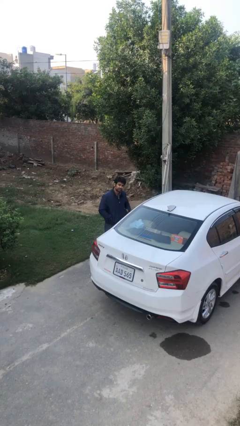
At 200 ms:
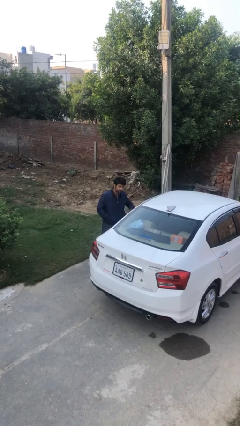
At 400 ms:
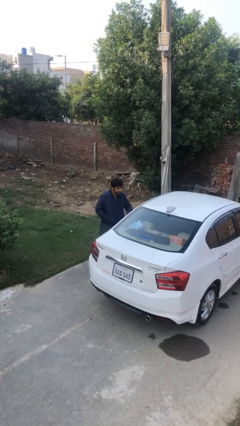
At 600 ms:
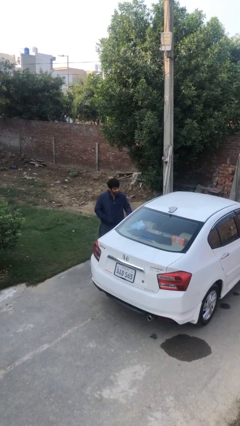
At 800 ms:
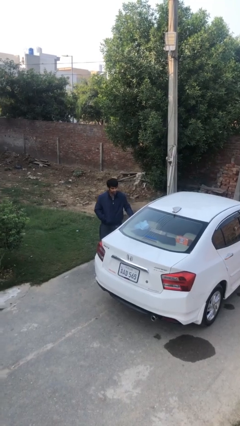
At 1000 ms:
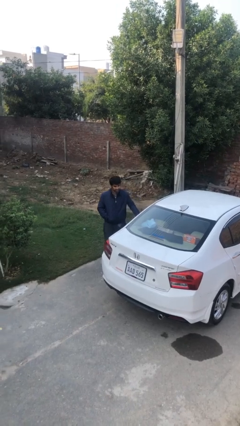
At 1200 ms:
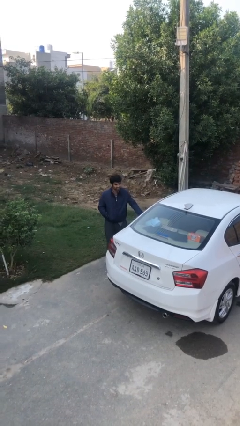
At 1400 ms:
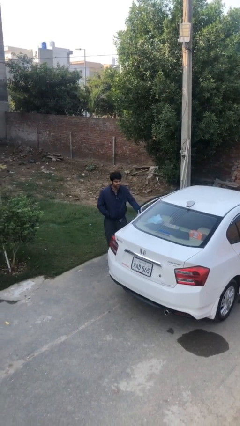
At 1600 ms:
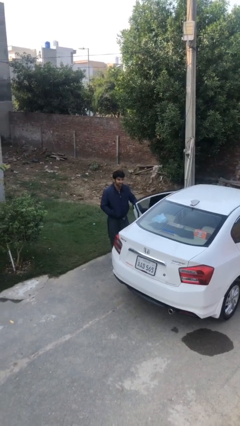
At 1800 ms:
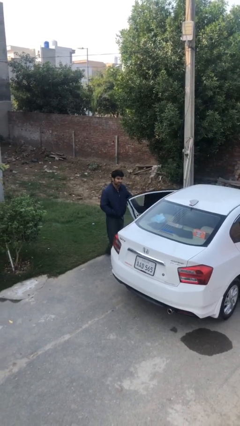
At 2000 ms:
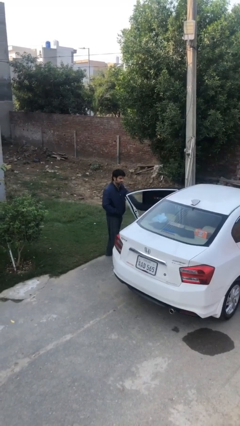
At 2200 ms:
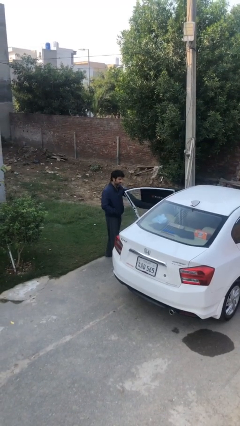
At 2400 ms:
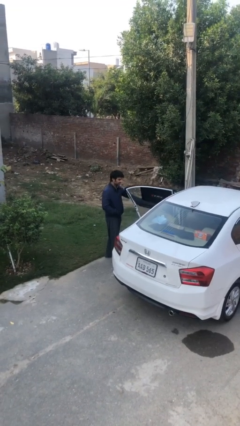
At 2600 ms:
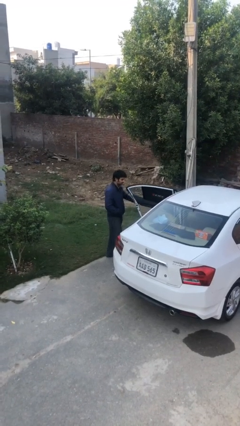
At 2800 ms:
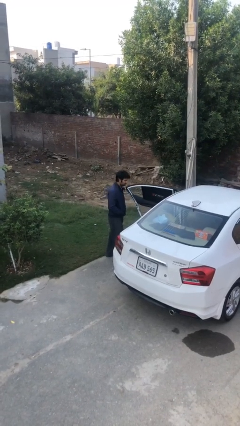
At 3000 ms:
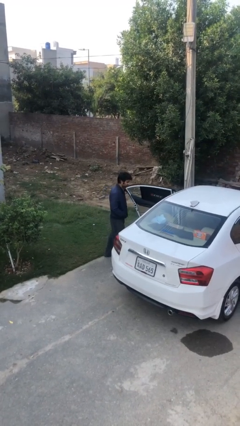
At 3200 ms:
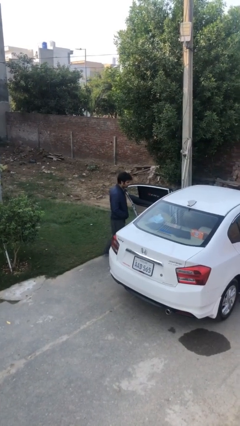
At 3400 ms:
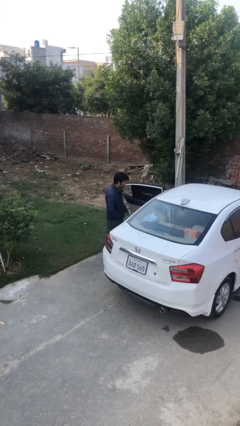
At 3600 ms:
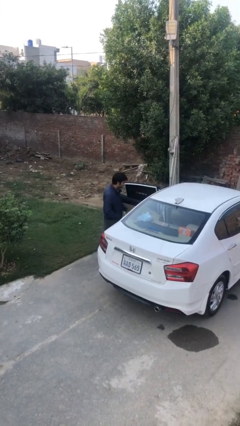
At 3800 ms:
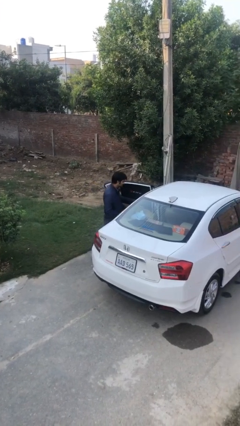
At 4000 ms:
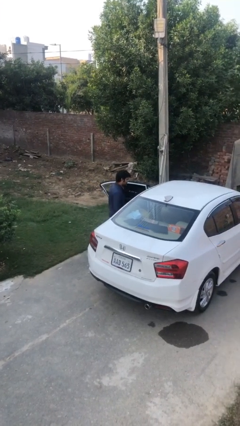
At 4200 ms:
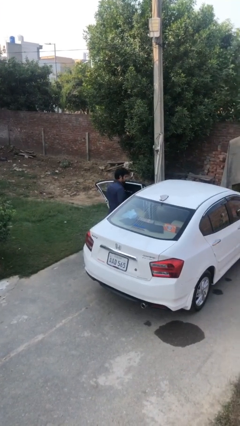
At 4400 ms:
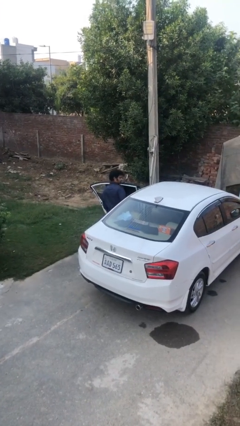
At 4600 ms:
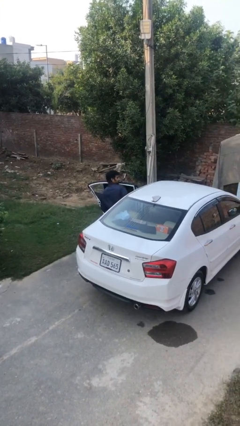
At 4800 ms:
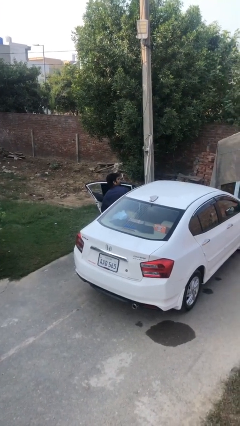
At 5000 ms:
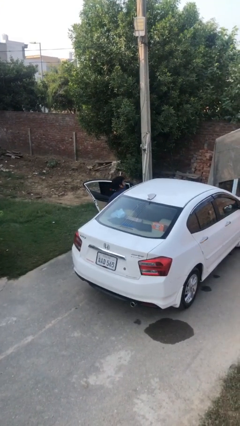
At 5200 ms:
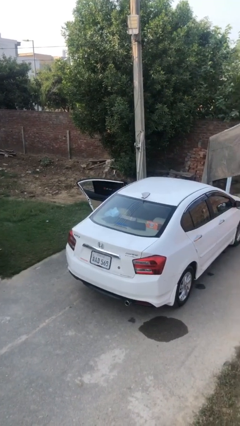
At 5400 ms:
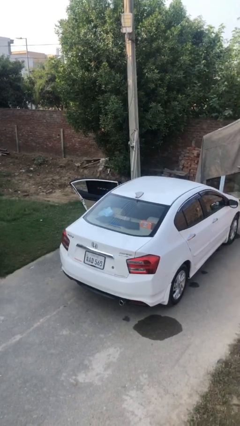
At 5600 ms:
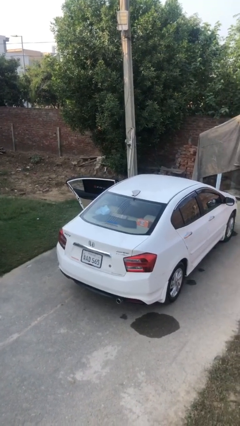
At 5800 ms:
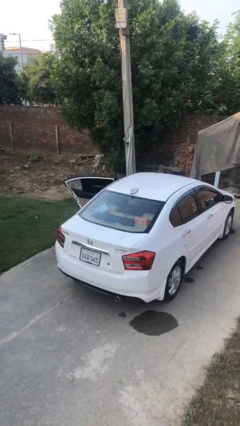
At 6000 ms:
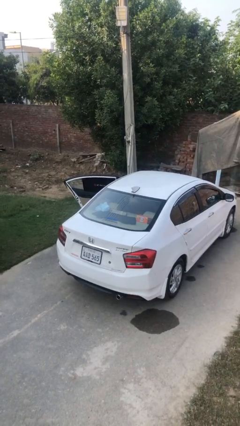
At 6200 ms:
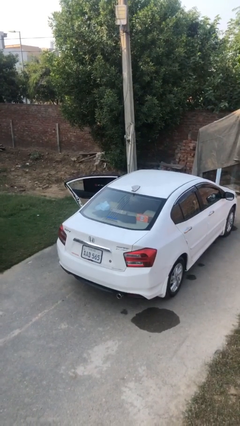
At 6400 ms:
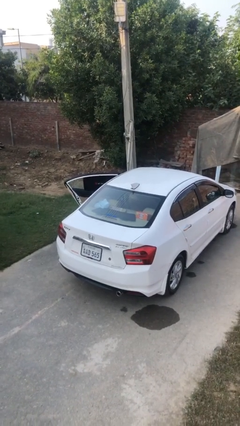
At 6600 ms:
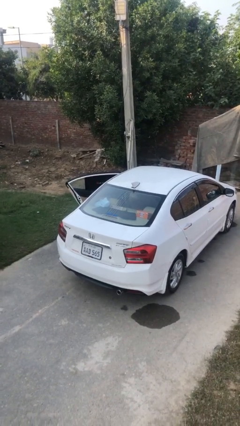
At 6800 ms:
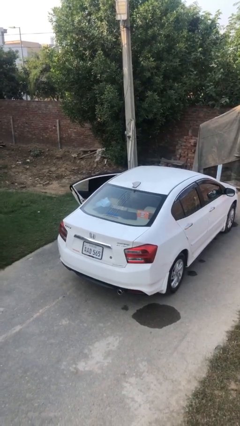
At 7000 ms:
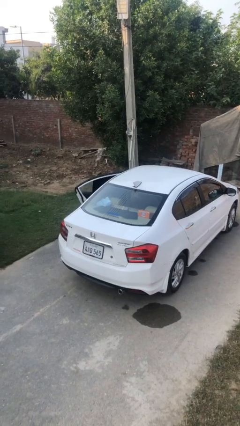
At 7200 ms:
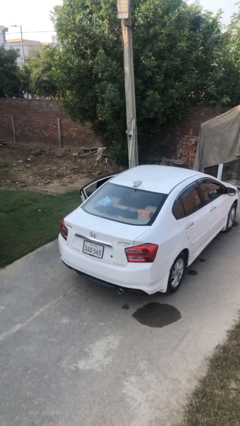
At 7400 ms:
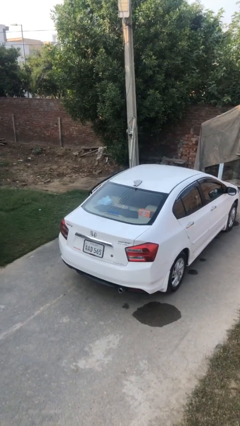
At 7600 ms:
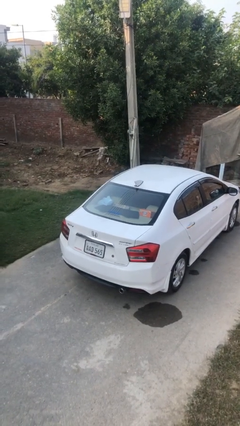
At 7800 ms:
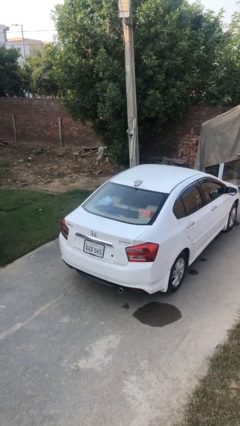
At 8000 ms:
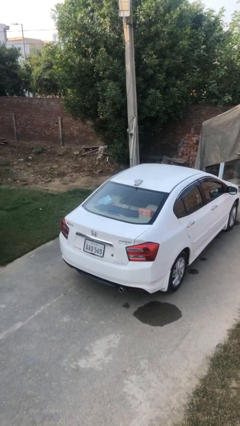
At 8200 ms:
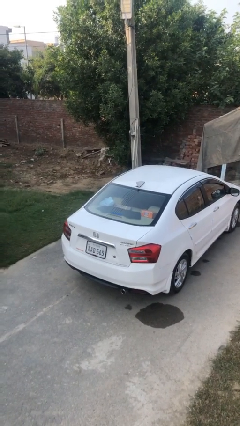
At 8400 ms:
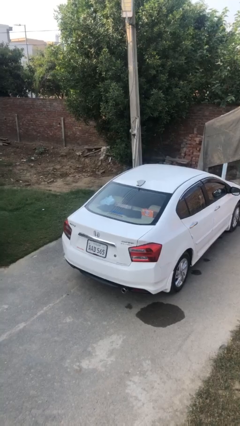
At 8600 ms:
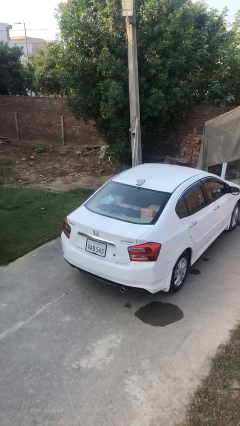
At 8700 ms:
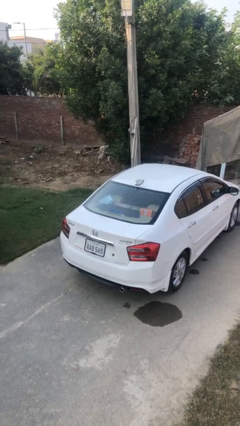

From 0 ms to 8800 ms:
car picks up person

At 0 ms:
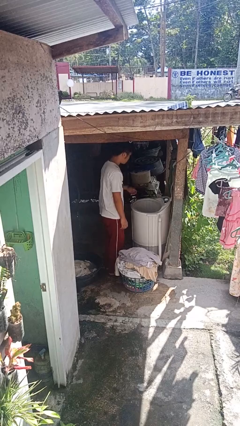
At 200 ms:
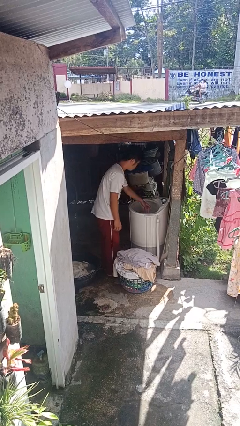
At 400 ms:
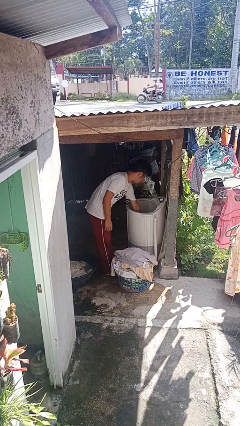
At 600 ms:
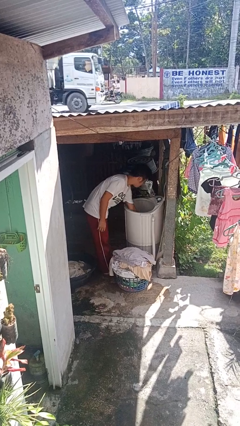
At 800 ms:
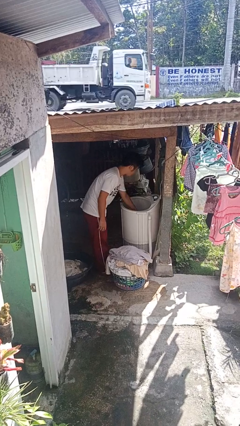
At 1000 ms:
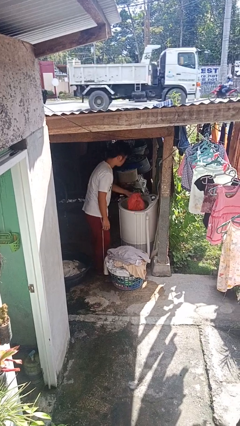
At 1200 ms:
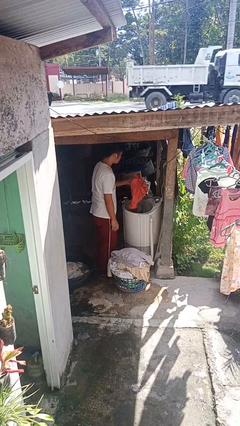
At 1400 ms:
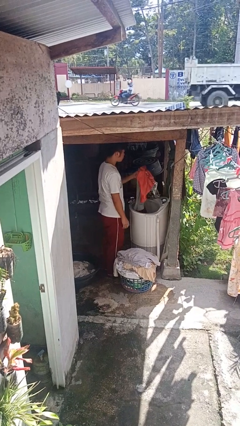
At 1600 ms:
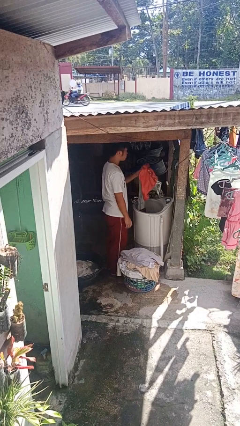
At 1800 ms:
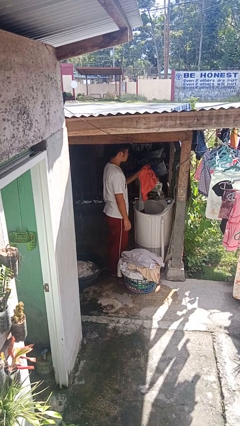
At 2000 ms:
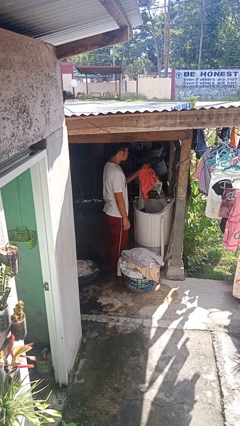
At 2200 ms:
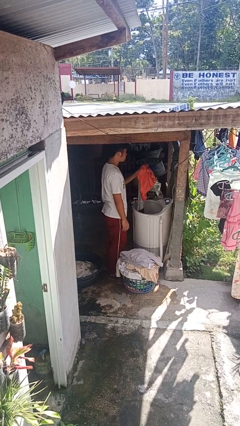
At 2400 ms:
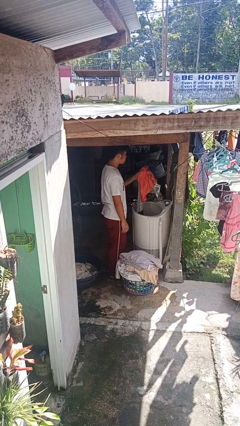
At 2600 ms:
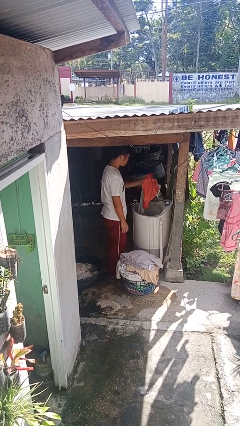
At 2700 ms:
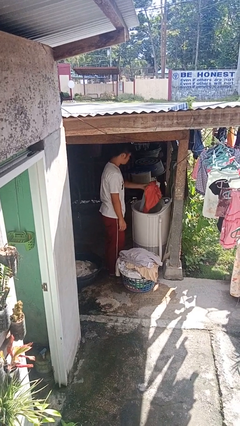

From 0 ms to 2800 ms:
person unloads clotheswasher

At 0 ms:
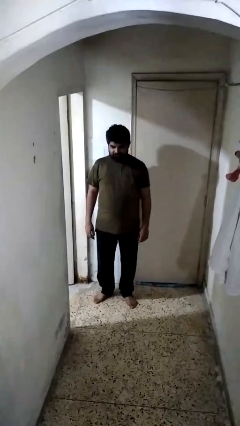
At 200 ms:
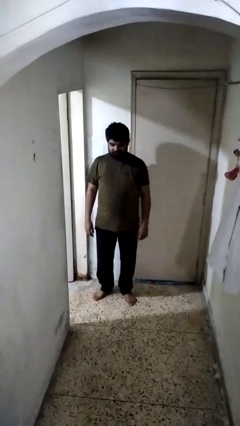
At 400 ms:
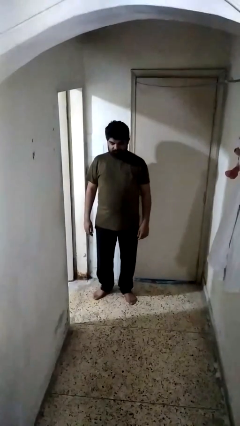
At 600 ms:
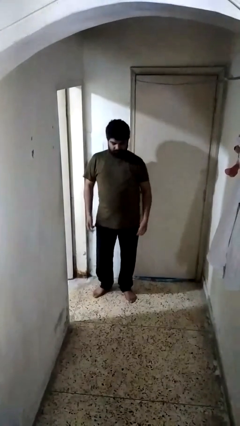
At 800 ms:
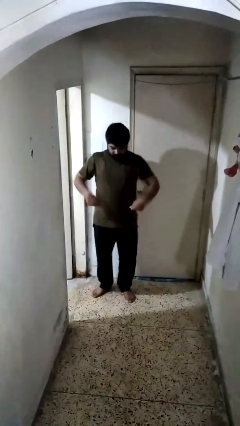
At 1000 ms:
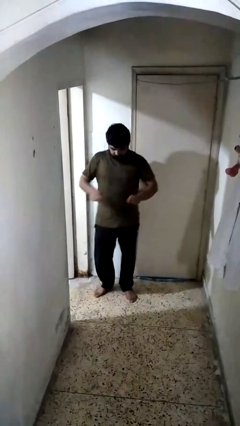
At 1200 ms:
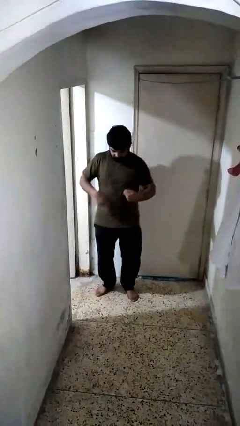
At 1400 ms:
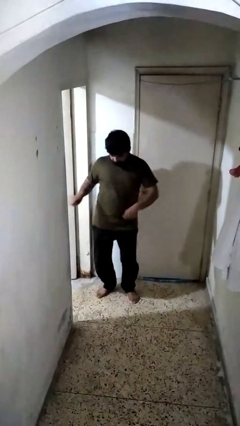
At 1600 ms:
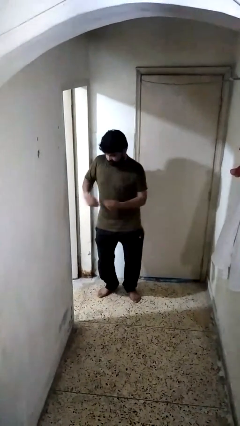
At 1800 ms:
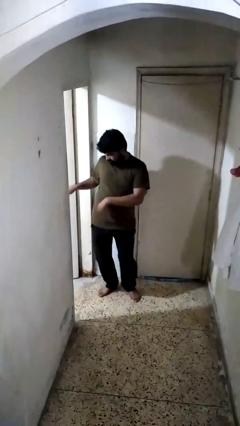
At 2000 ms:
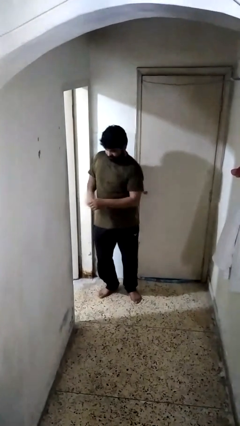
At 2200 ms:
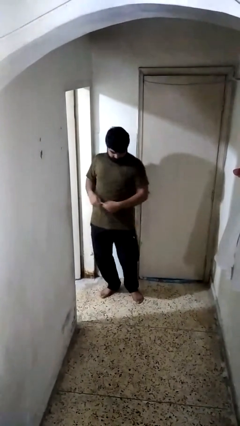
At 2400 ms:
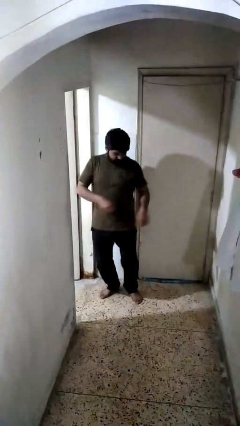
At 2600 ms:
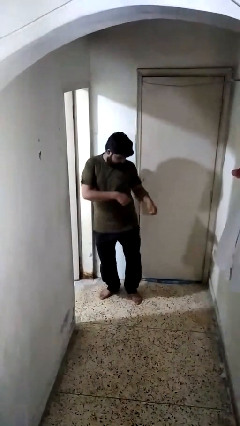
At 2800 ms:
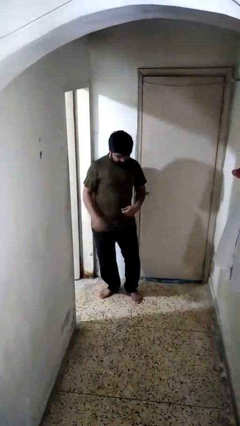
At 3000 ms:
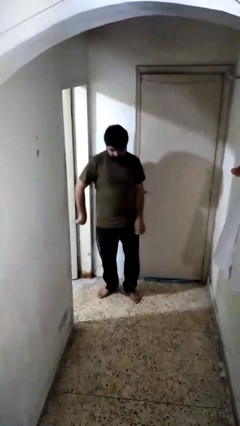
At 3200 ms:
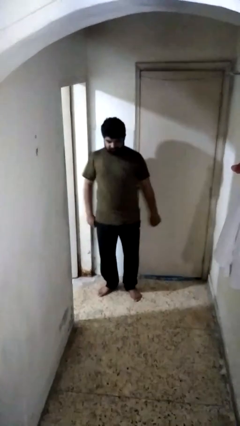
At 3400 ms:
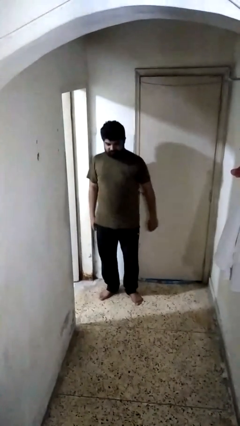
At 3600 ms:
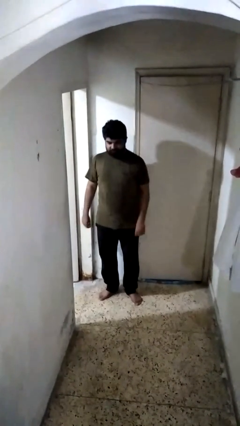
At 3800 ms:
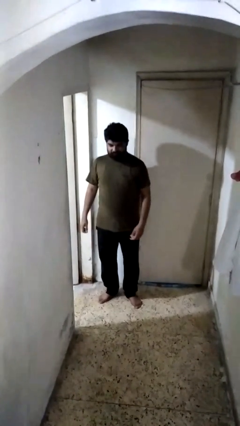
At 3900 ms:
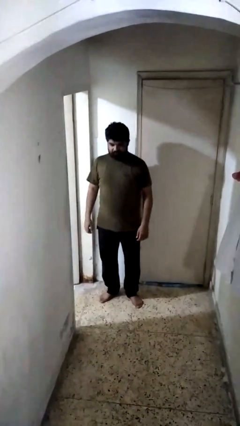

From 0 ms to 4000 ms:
person dances in place

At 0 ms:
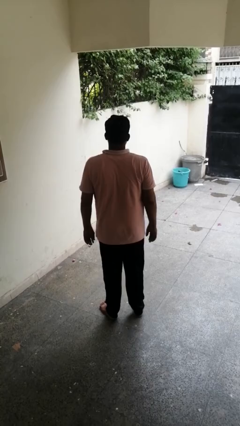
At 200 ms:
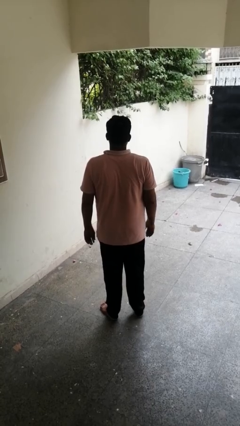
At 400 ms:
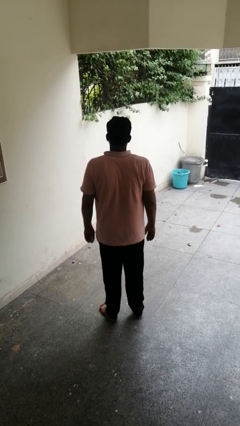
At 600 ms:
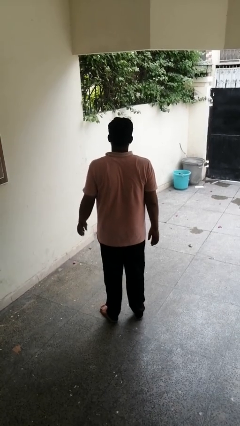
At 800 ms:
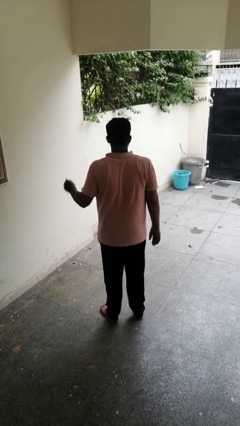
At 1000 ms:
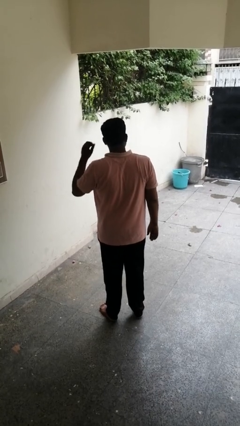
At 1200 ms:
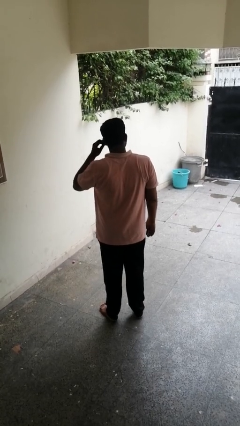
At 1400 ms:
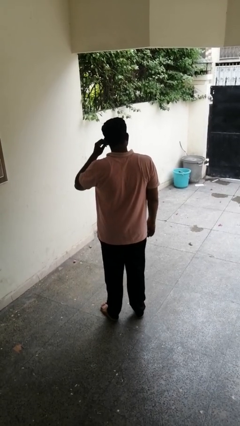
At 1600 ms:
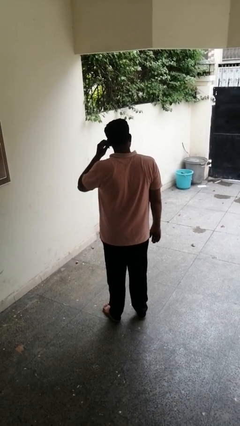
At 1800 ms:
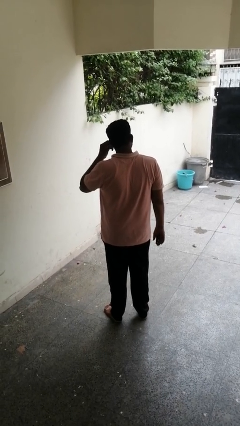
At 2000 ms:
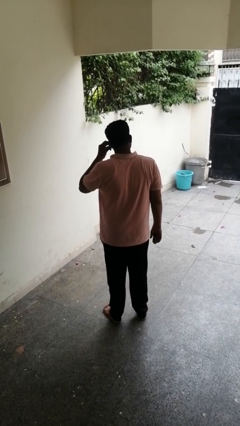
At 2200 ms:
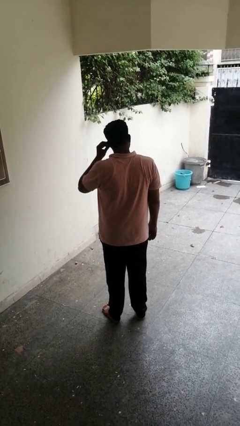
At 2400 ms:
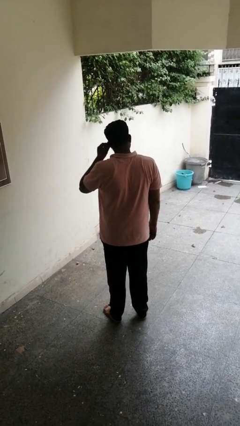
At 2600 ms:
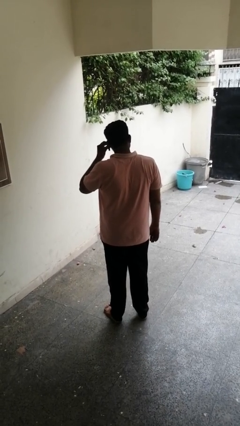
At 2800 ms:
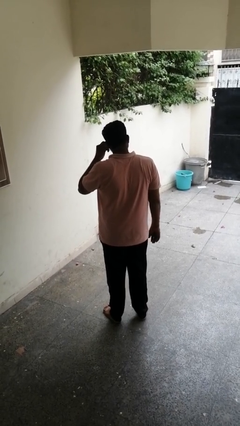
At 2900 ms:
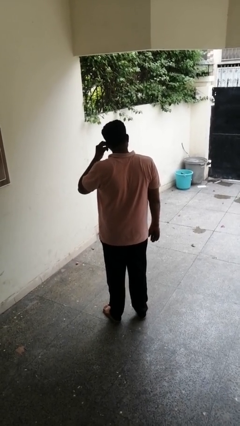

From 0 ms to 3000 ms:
person touches earlobe
